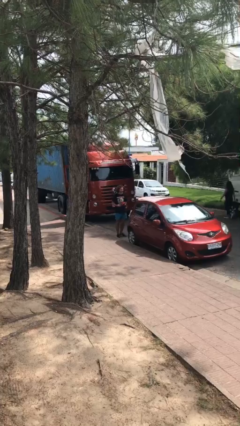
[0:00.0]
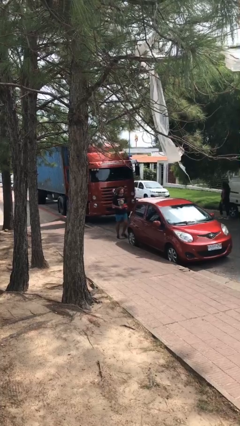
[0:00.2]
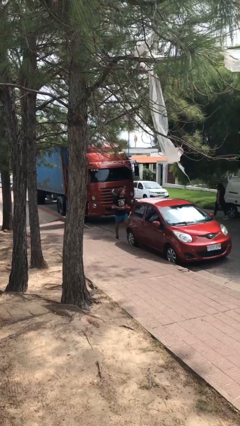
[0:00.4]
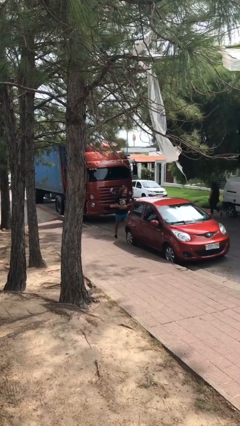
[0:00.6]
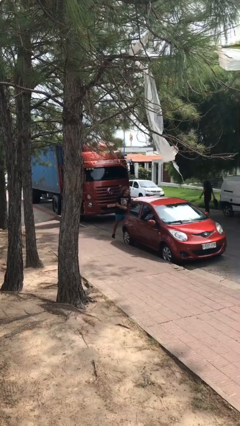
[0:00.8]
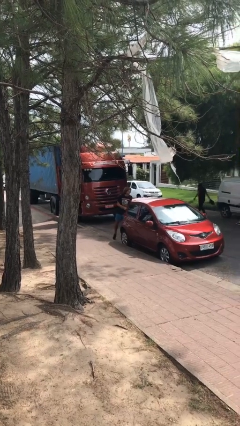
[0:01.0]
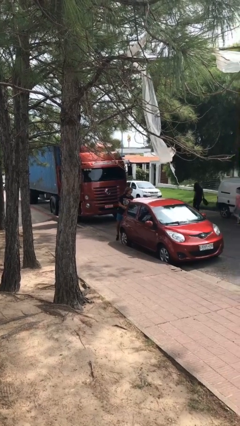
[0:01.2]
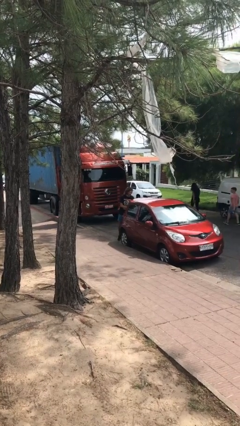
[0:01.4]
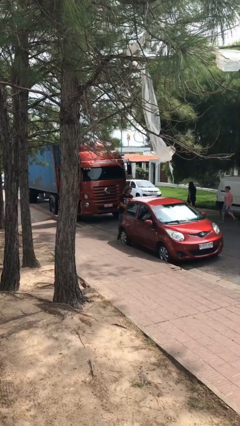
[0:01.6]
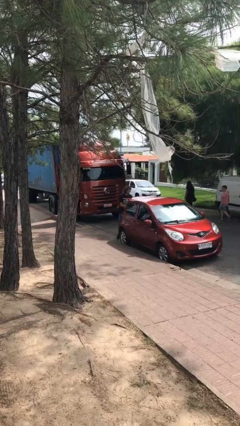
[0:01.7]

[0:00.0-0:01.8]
person loads car

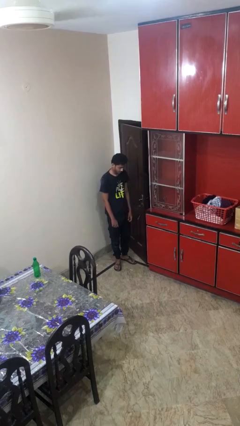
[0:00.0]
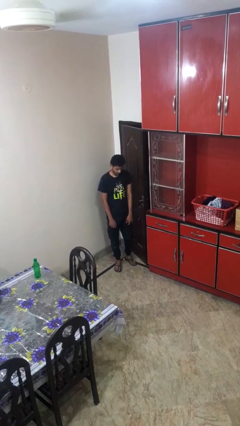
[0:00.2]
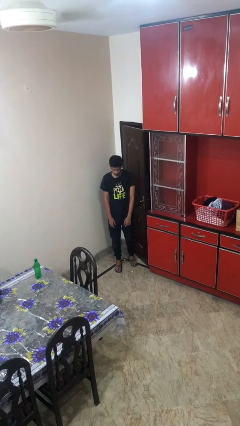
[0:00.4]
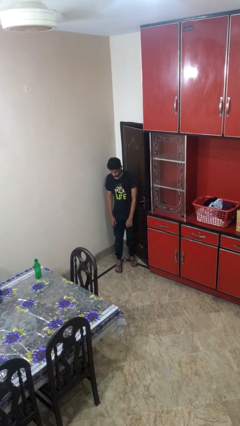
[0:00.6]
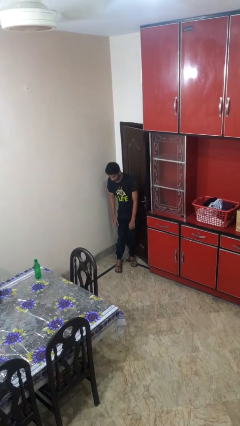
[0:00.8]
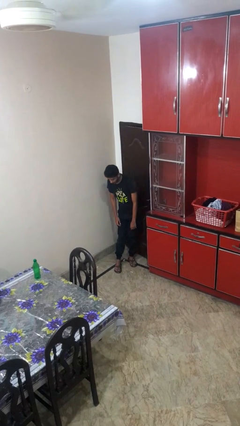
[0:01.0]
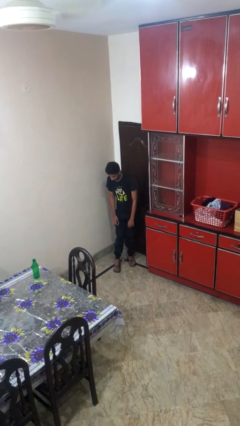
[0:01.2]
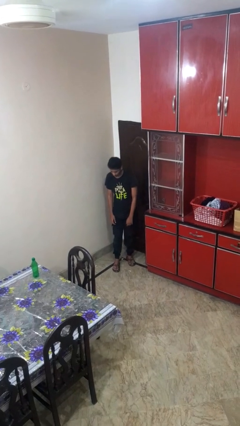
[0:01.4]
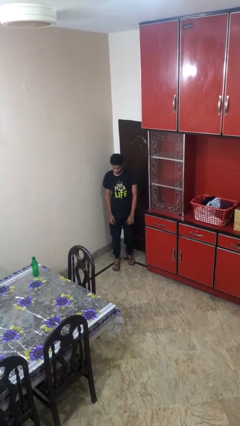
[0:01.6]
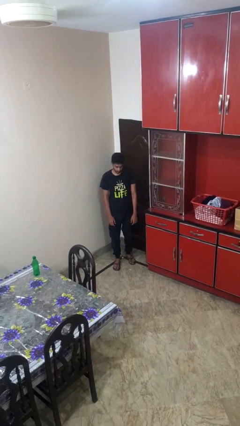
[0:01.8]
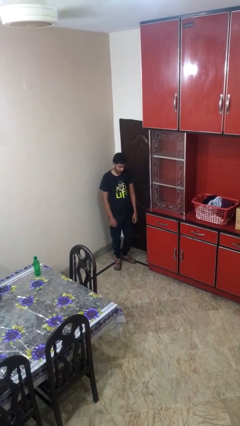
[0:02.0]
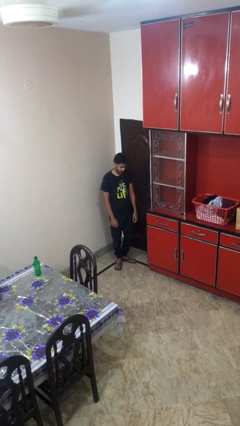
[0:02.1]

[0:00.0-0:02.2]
person closes door with hip

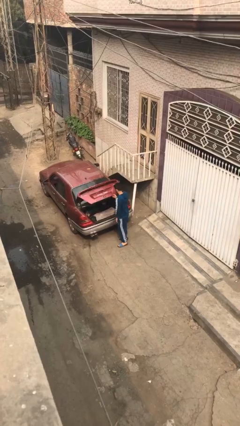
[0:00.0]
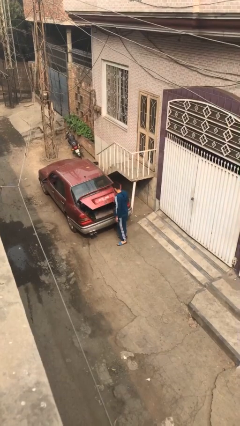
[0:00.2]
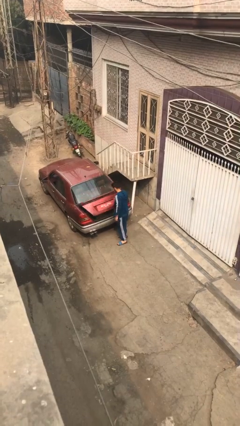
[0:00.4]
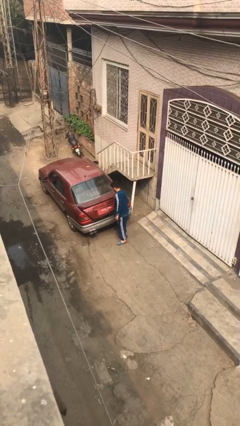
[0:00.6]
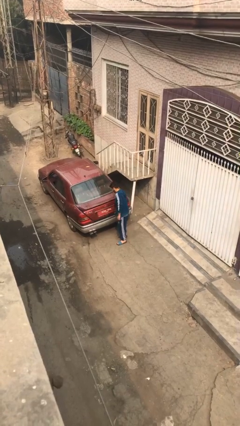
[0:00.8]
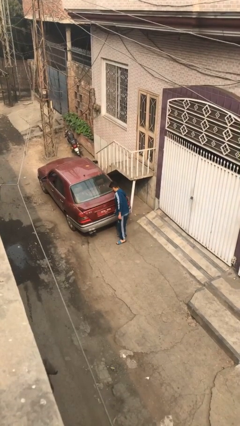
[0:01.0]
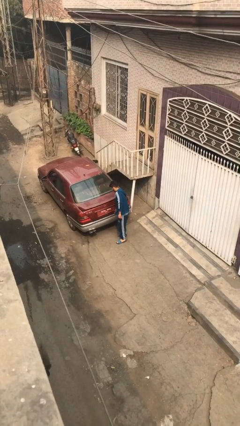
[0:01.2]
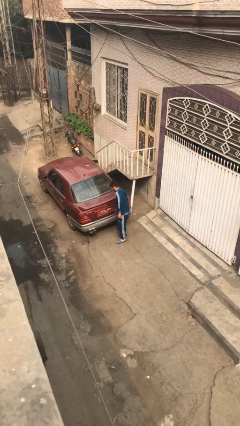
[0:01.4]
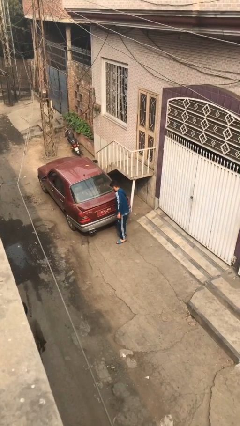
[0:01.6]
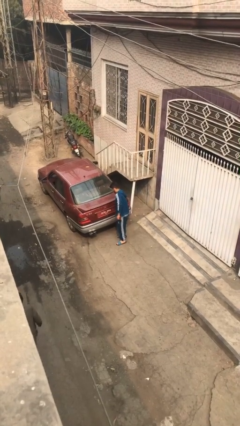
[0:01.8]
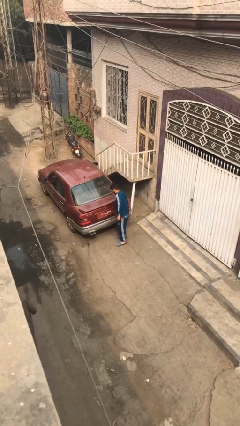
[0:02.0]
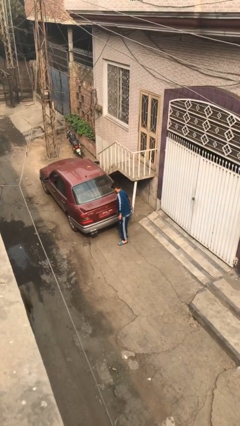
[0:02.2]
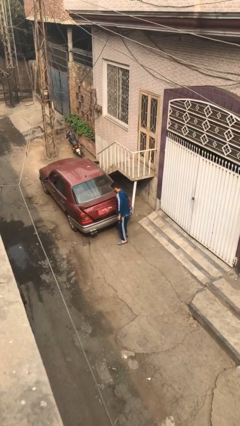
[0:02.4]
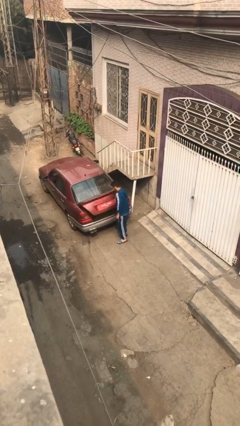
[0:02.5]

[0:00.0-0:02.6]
person closes car trunk

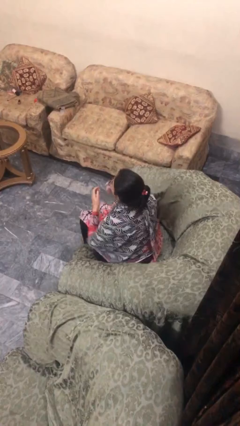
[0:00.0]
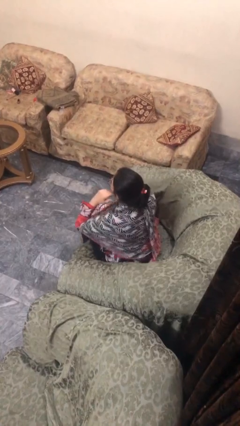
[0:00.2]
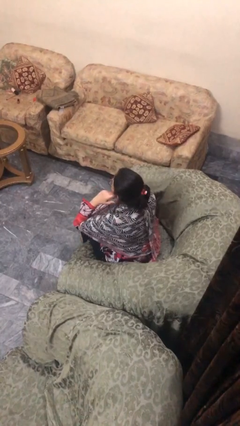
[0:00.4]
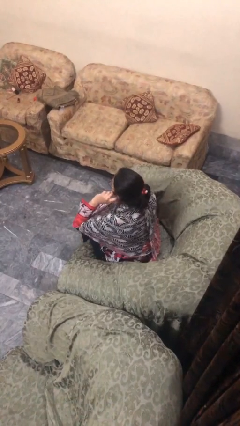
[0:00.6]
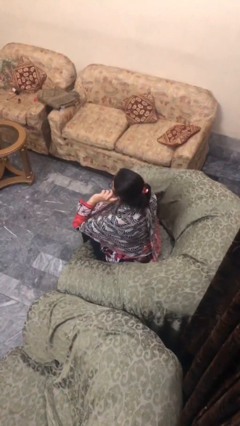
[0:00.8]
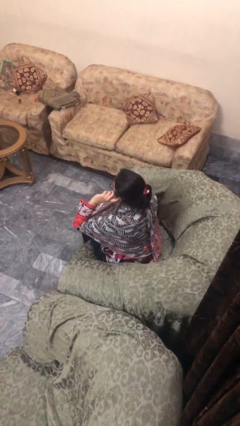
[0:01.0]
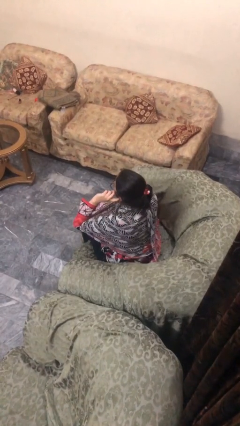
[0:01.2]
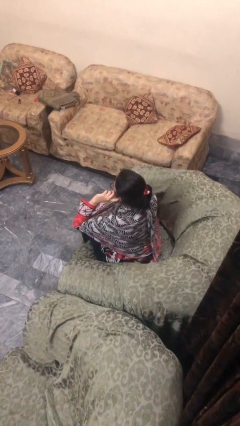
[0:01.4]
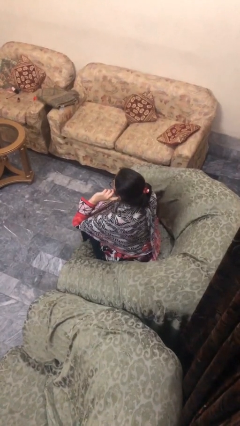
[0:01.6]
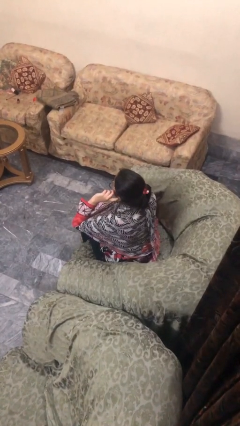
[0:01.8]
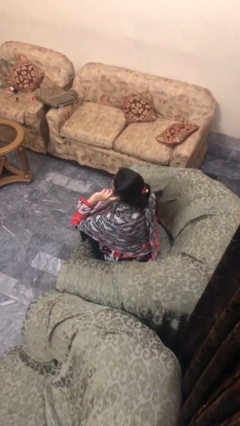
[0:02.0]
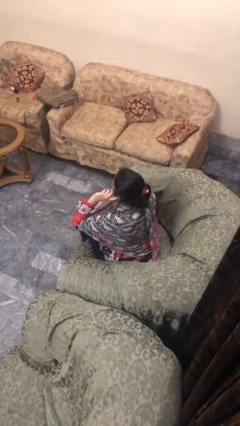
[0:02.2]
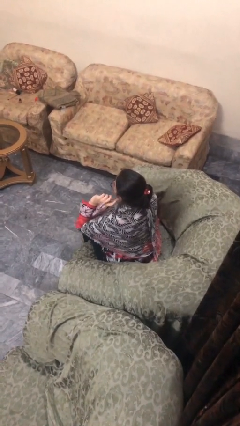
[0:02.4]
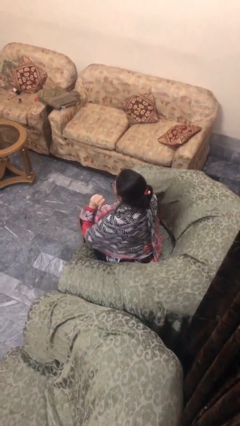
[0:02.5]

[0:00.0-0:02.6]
person puts fingers in ear

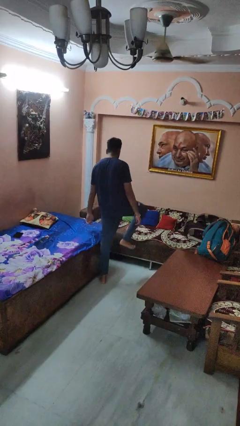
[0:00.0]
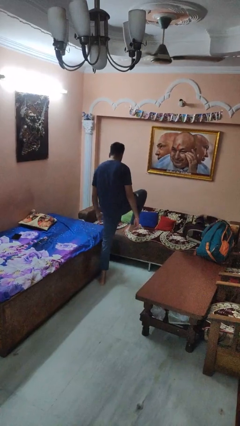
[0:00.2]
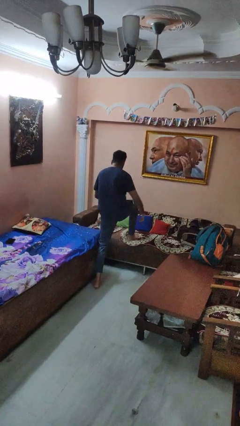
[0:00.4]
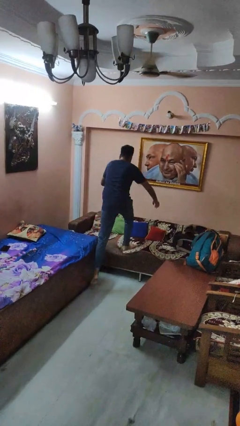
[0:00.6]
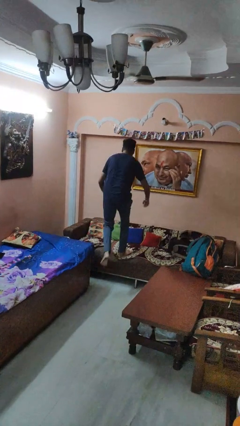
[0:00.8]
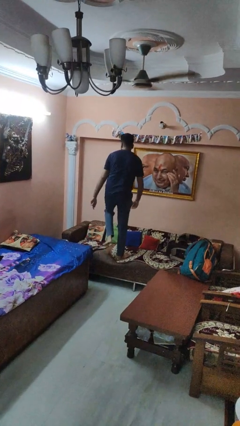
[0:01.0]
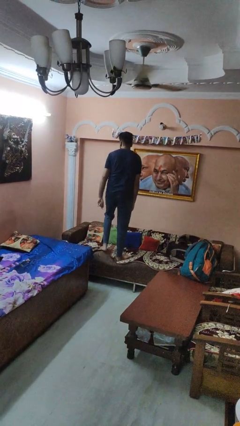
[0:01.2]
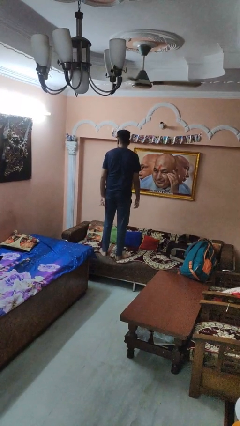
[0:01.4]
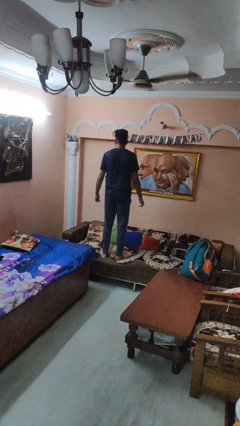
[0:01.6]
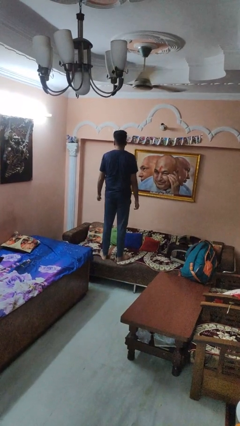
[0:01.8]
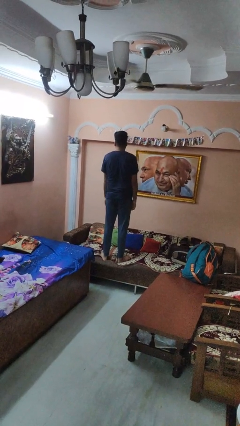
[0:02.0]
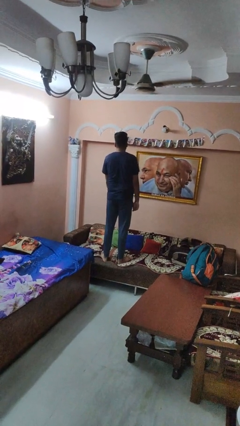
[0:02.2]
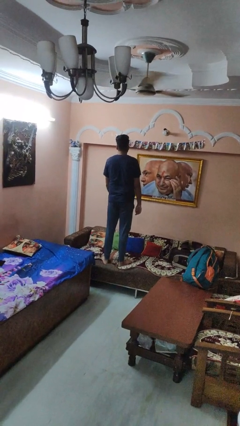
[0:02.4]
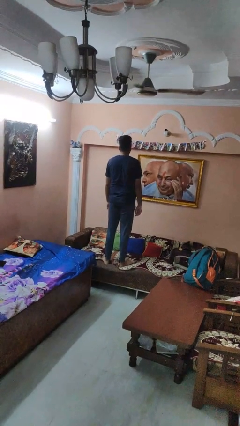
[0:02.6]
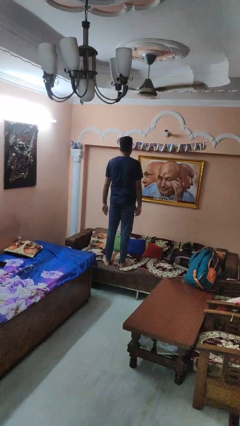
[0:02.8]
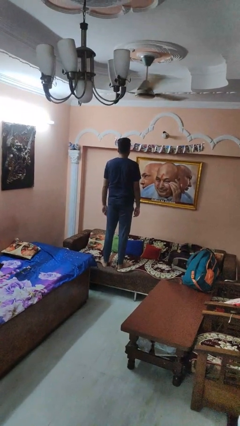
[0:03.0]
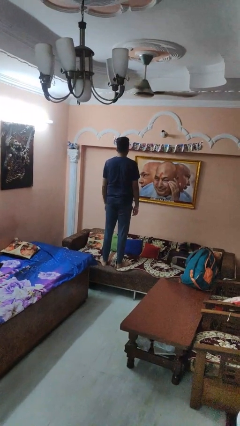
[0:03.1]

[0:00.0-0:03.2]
person climbs on couch

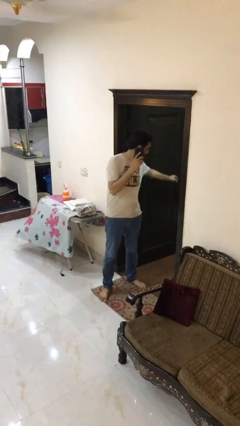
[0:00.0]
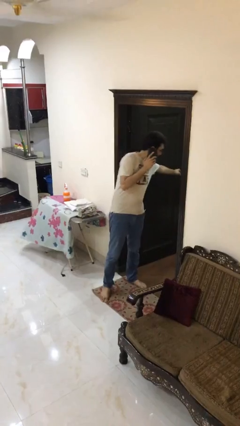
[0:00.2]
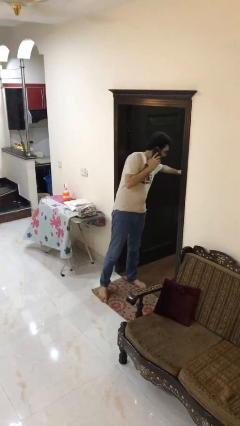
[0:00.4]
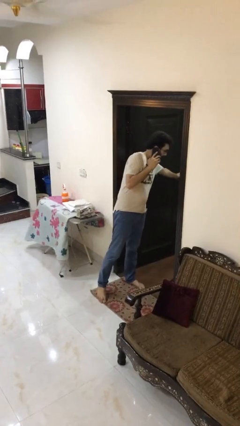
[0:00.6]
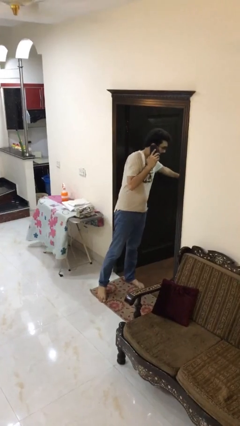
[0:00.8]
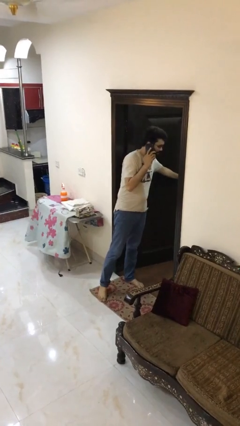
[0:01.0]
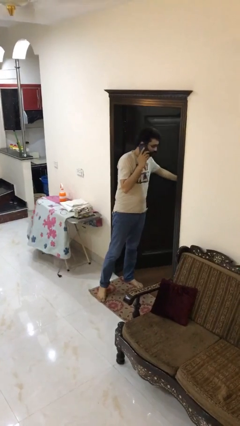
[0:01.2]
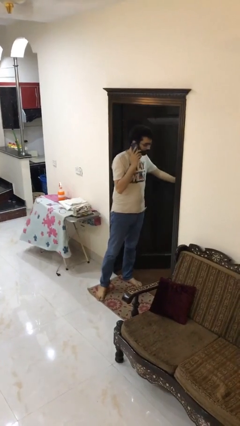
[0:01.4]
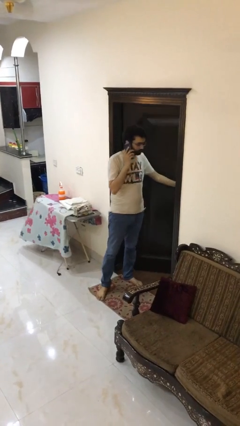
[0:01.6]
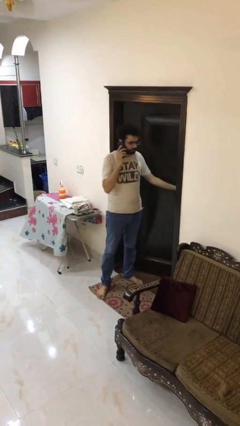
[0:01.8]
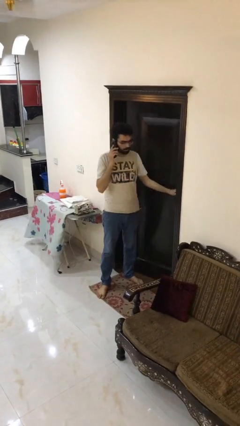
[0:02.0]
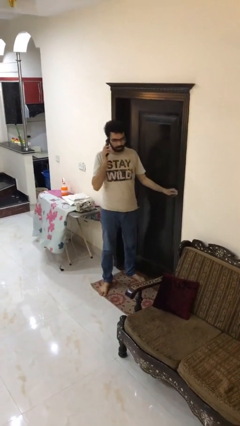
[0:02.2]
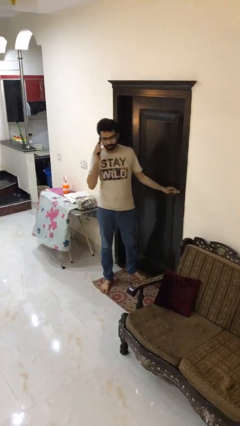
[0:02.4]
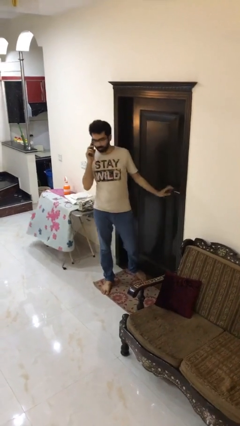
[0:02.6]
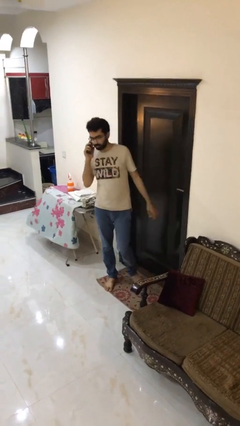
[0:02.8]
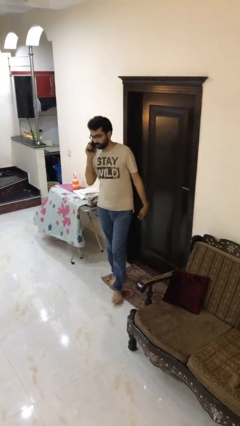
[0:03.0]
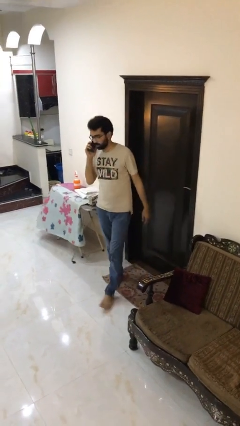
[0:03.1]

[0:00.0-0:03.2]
person closes facility door

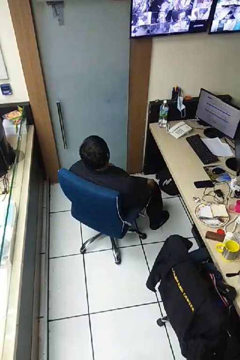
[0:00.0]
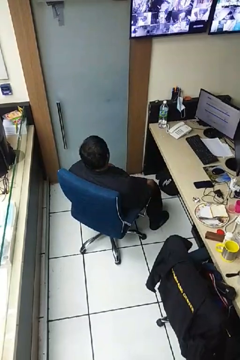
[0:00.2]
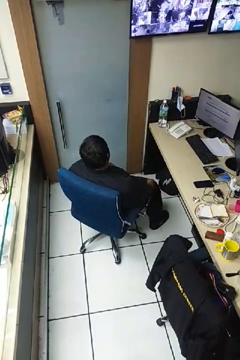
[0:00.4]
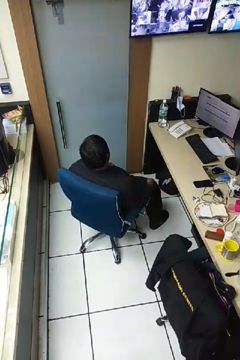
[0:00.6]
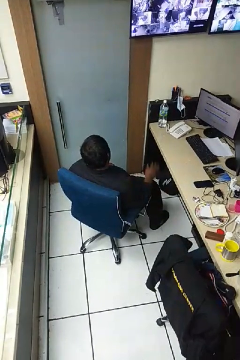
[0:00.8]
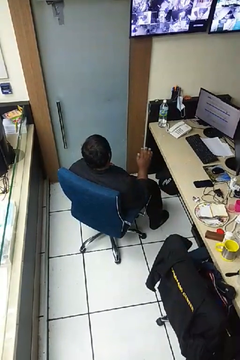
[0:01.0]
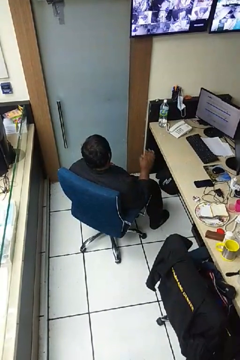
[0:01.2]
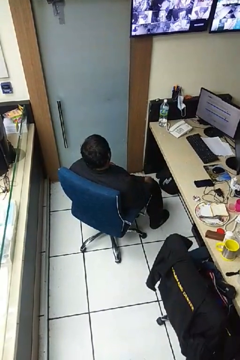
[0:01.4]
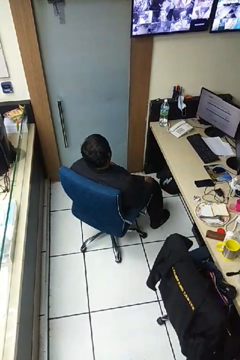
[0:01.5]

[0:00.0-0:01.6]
person slaps hands on thighs
